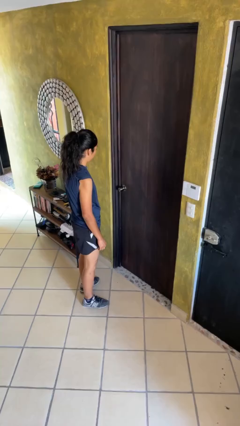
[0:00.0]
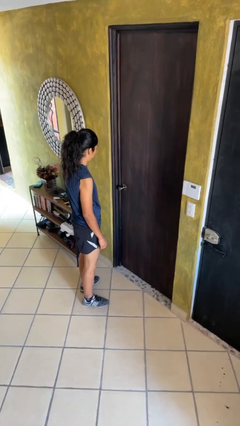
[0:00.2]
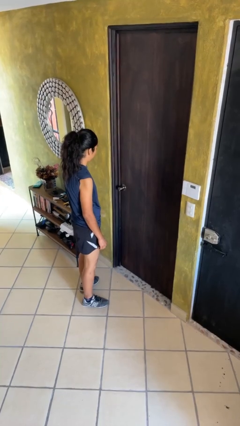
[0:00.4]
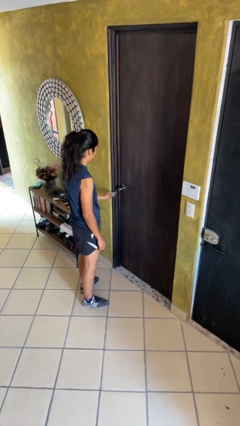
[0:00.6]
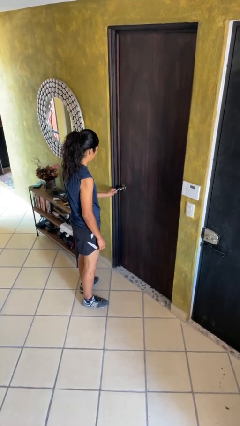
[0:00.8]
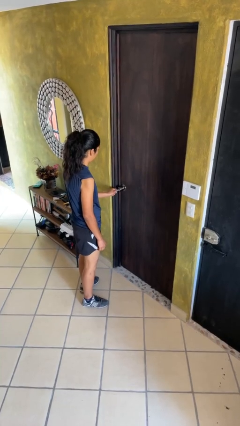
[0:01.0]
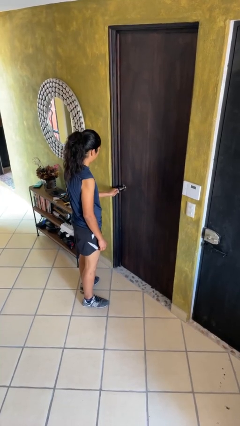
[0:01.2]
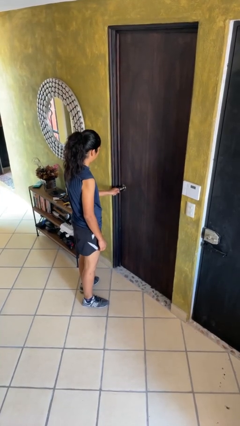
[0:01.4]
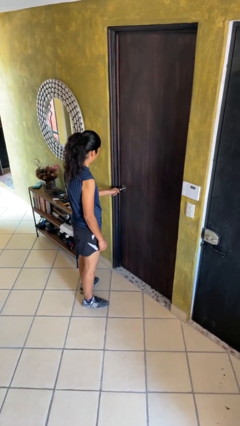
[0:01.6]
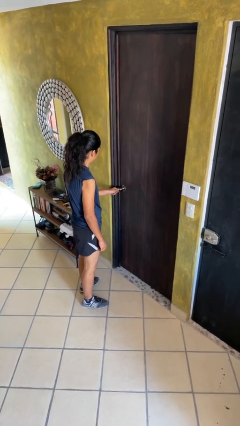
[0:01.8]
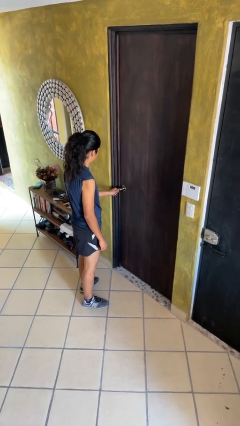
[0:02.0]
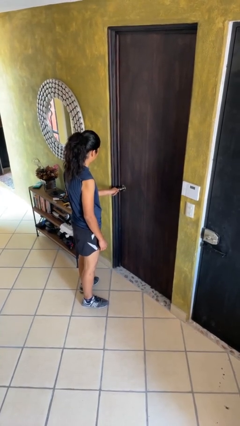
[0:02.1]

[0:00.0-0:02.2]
person locks door with keys

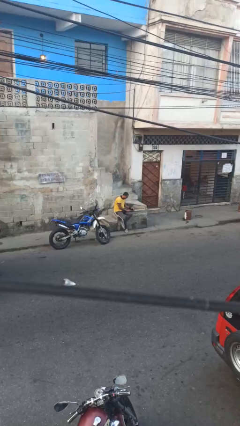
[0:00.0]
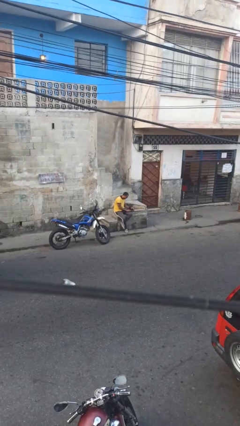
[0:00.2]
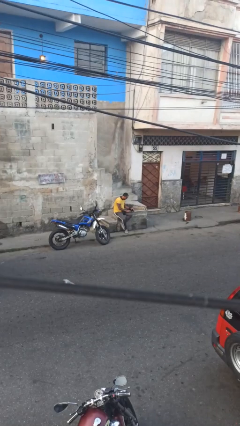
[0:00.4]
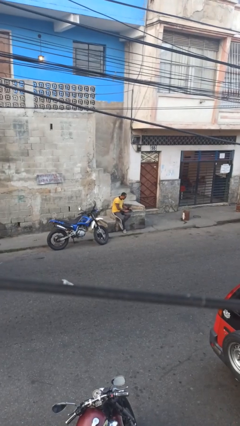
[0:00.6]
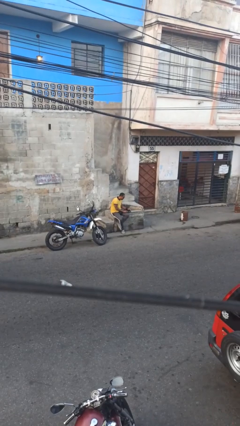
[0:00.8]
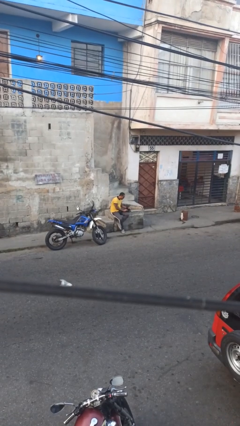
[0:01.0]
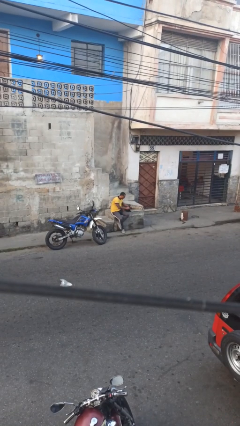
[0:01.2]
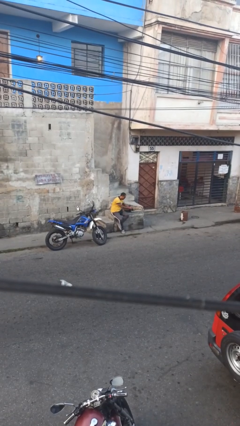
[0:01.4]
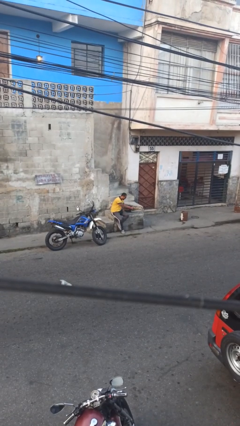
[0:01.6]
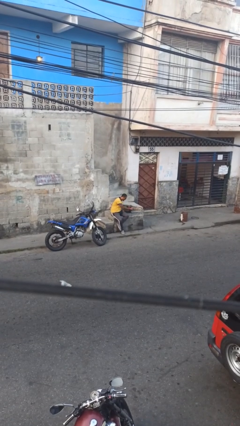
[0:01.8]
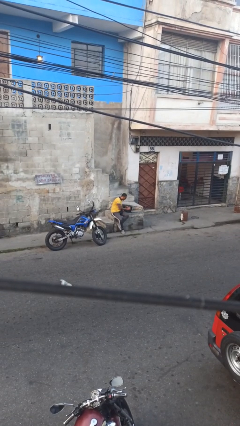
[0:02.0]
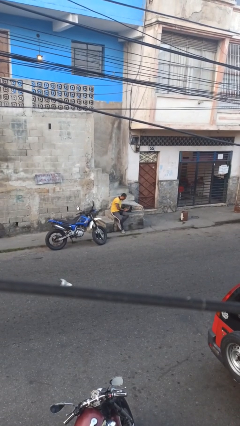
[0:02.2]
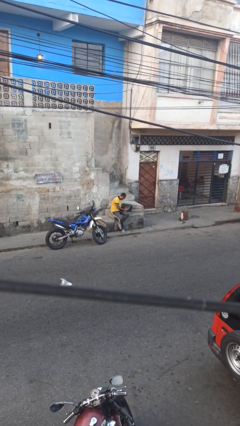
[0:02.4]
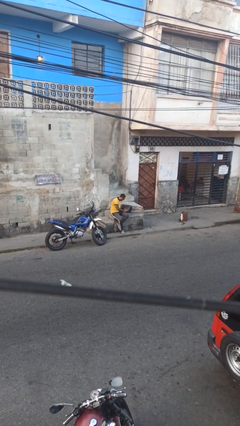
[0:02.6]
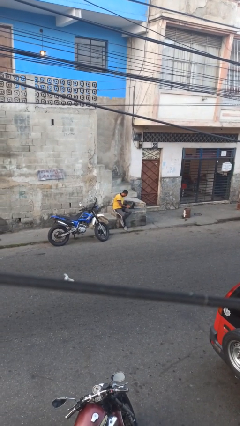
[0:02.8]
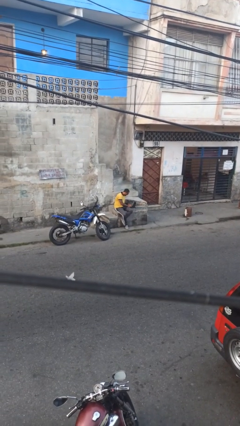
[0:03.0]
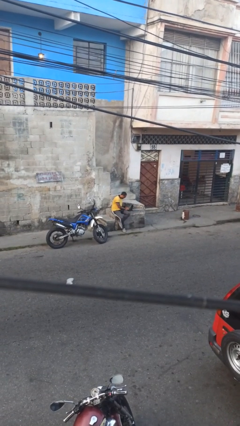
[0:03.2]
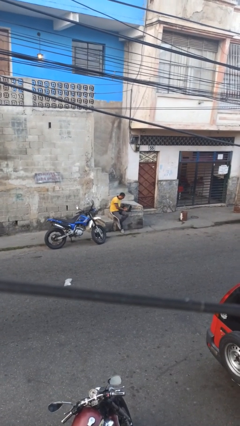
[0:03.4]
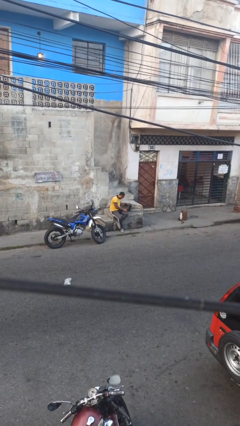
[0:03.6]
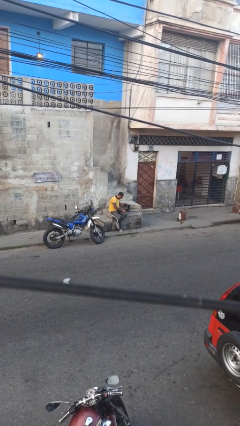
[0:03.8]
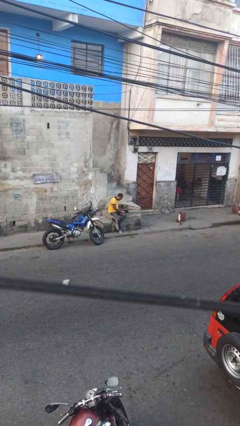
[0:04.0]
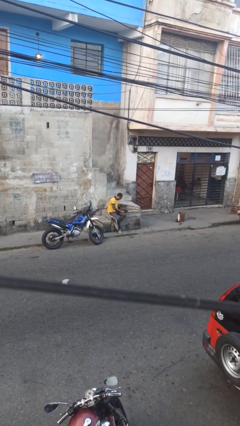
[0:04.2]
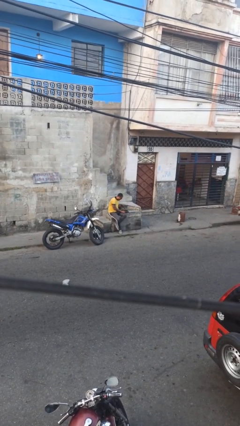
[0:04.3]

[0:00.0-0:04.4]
person interacts with laptop

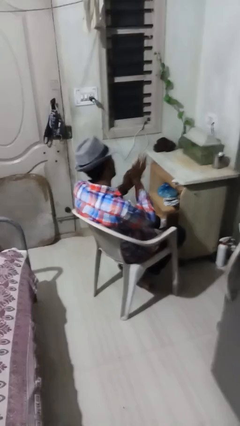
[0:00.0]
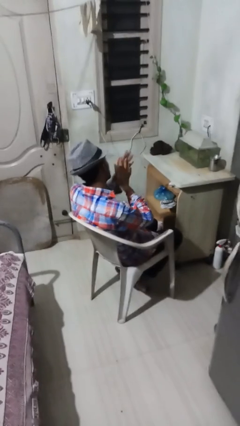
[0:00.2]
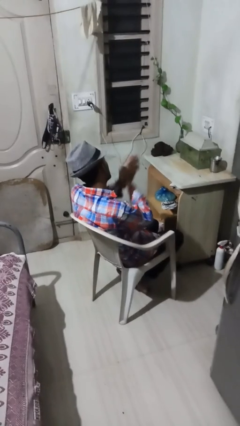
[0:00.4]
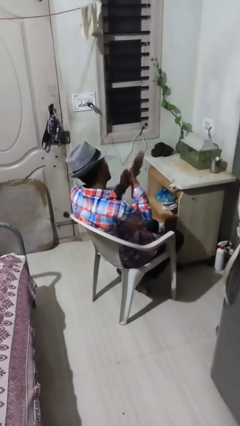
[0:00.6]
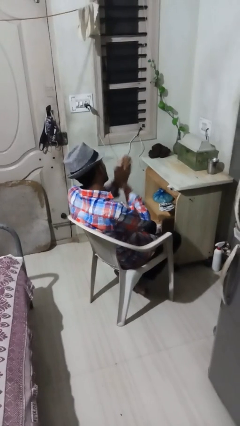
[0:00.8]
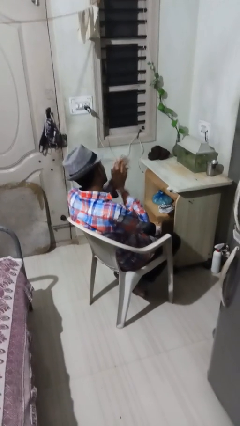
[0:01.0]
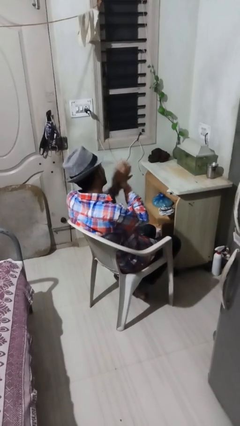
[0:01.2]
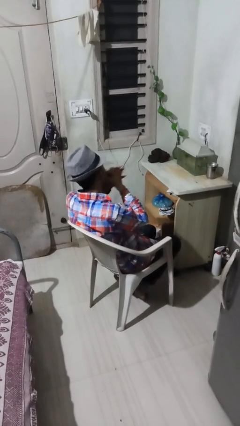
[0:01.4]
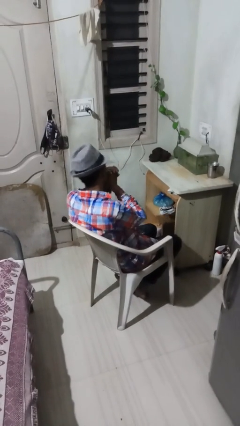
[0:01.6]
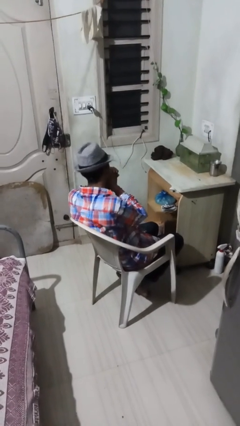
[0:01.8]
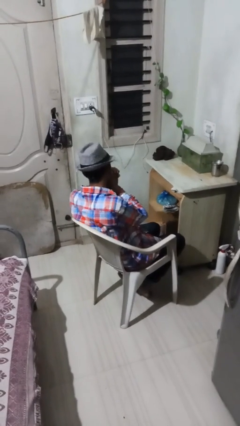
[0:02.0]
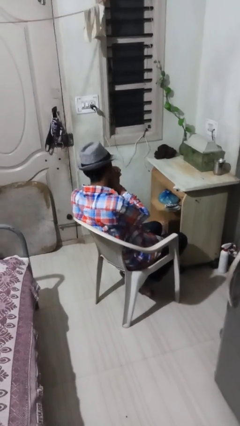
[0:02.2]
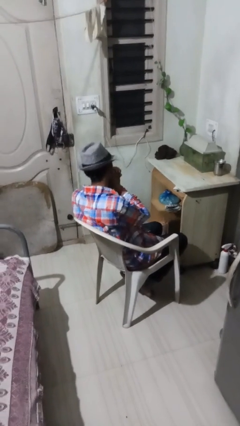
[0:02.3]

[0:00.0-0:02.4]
person blows into hands

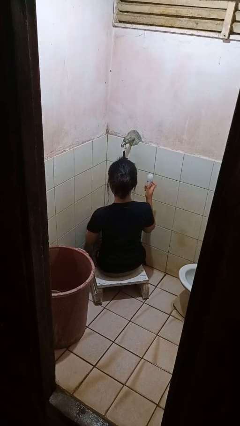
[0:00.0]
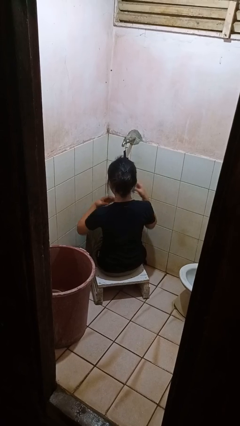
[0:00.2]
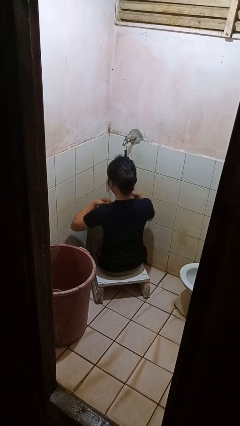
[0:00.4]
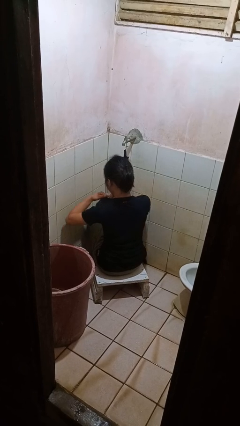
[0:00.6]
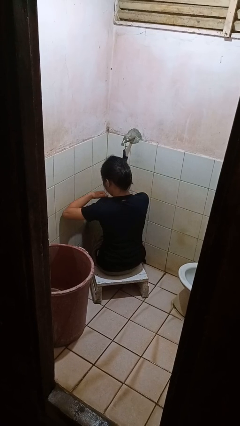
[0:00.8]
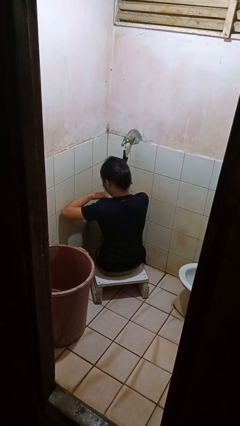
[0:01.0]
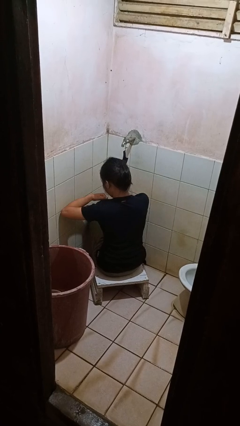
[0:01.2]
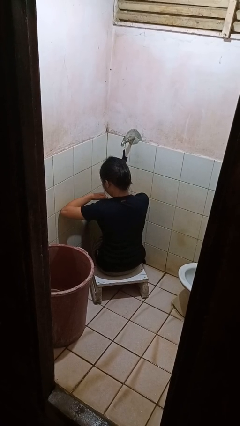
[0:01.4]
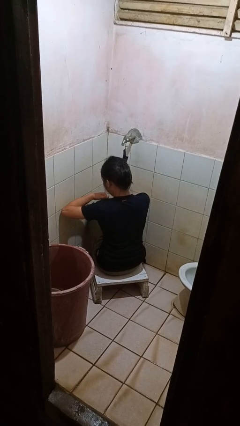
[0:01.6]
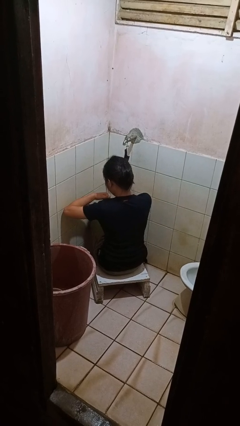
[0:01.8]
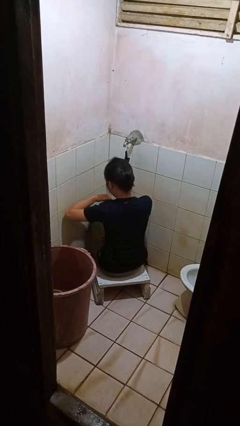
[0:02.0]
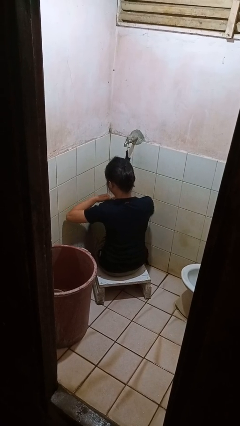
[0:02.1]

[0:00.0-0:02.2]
person applies deodorant

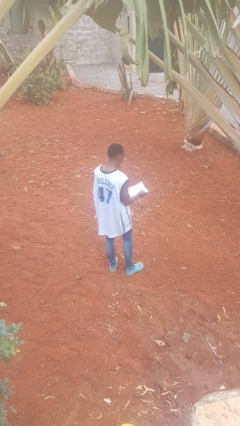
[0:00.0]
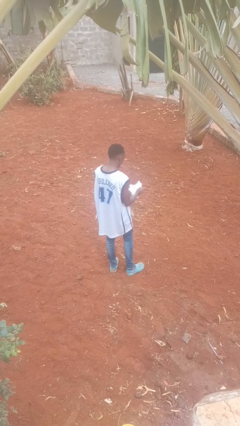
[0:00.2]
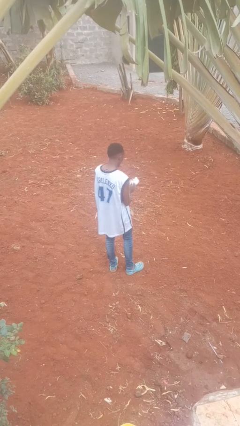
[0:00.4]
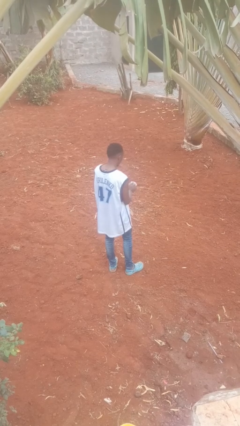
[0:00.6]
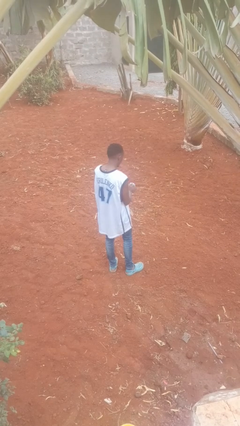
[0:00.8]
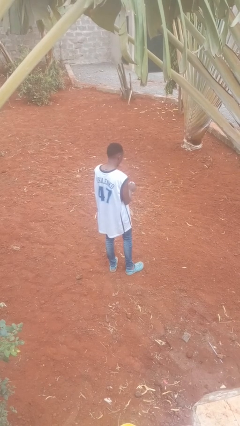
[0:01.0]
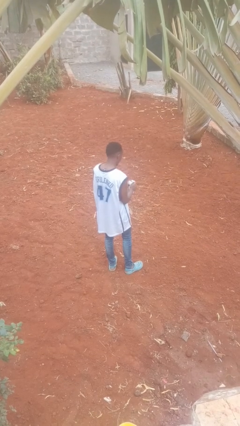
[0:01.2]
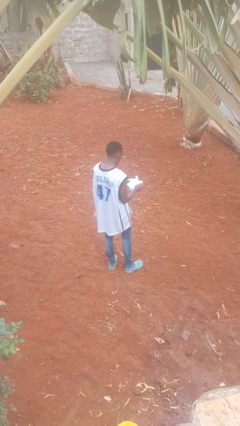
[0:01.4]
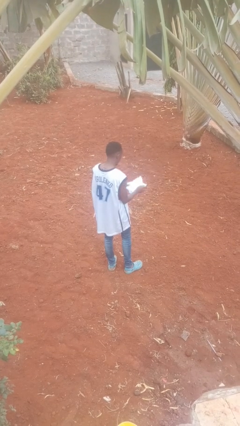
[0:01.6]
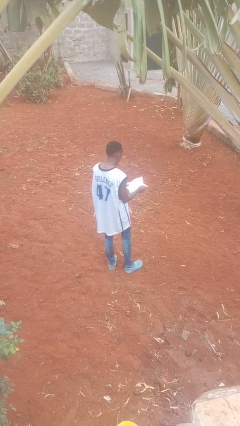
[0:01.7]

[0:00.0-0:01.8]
person crumples paper

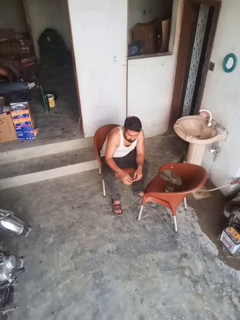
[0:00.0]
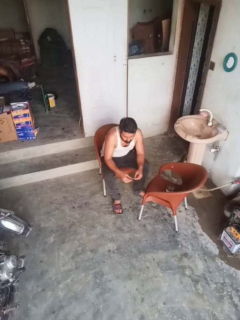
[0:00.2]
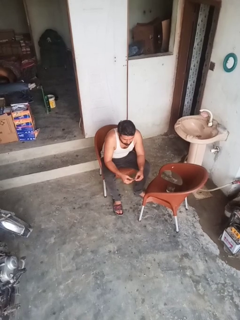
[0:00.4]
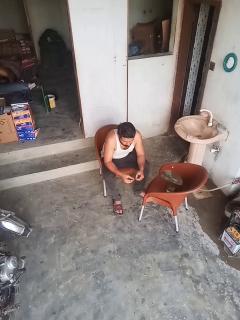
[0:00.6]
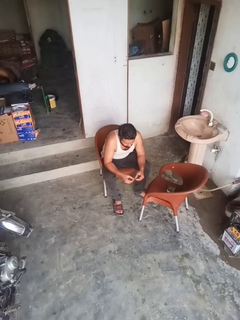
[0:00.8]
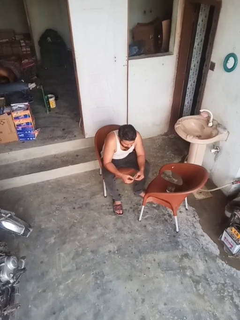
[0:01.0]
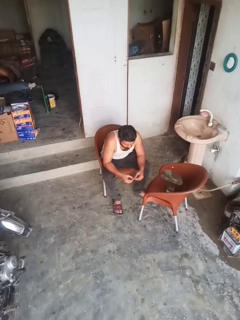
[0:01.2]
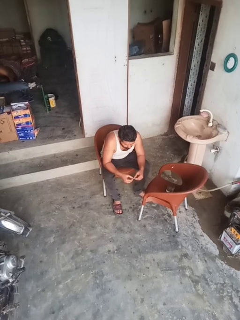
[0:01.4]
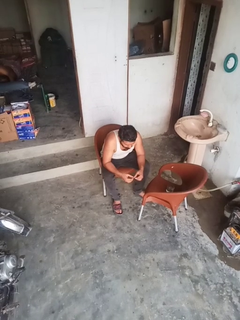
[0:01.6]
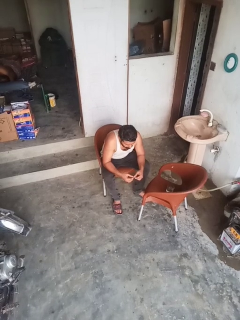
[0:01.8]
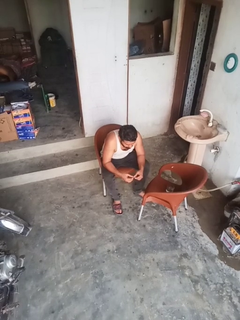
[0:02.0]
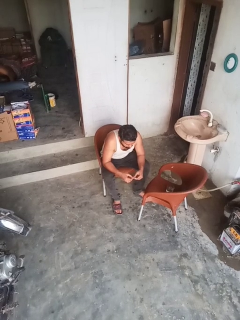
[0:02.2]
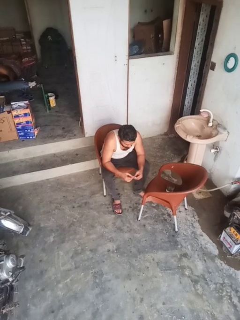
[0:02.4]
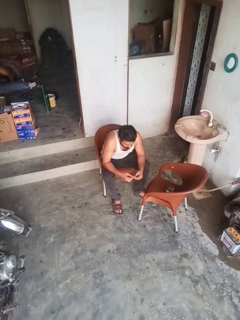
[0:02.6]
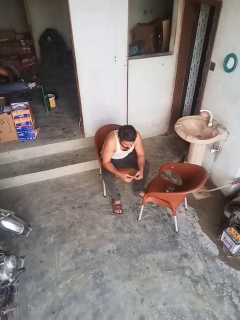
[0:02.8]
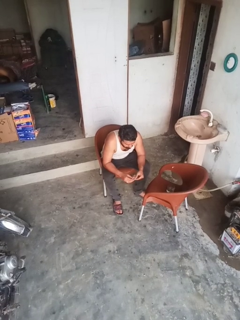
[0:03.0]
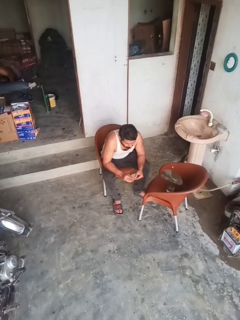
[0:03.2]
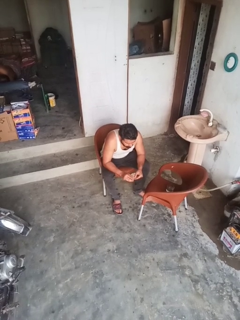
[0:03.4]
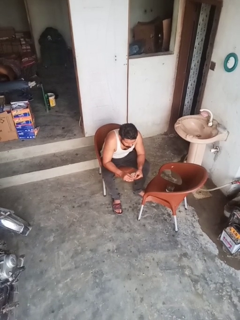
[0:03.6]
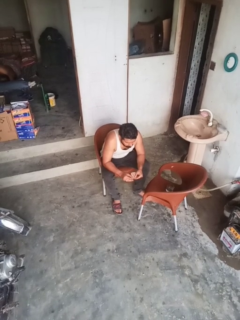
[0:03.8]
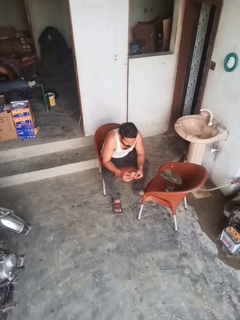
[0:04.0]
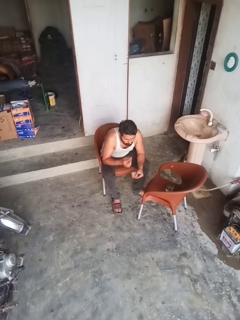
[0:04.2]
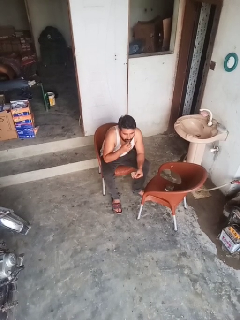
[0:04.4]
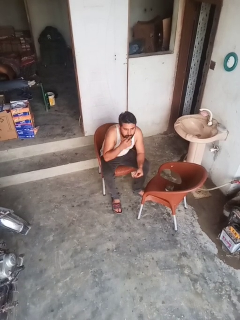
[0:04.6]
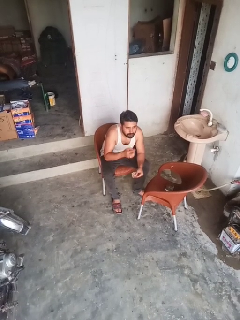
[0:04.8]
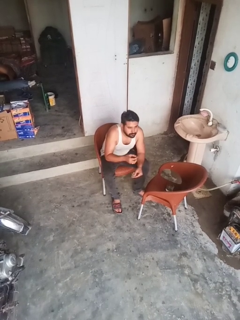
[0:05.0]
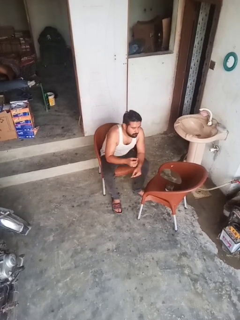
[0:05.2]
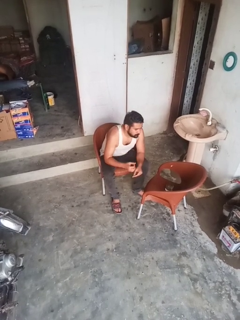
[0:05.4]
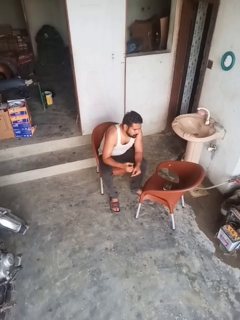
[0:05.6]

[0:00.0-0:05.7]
person takes medicine pills

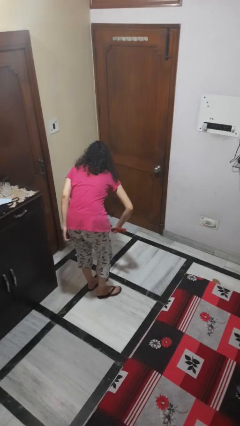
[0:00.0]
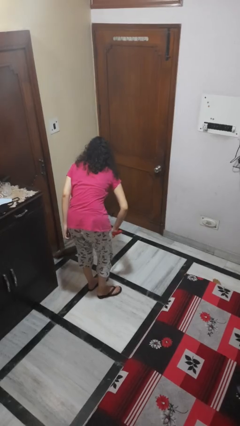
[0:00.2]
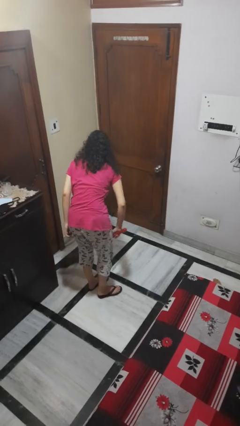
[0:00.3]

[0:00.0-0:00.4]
person sweeps floor
